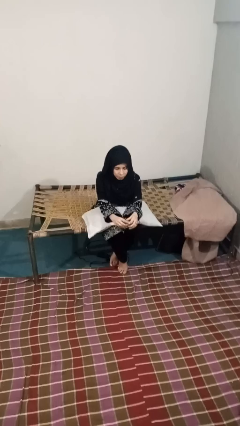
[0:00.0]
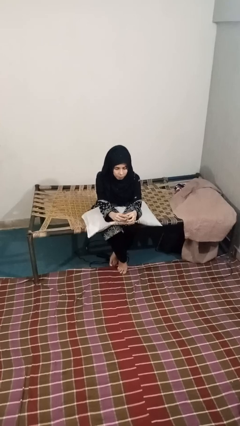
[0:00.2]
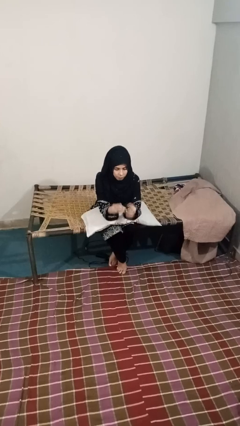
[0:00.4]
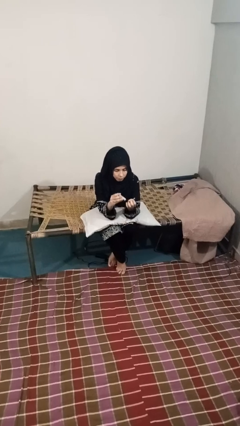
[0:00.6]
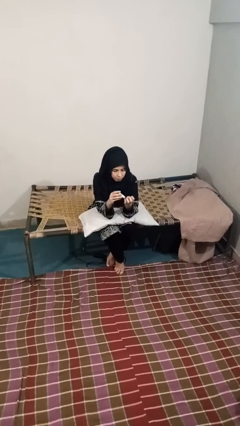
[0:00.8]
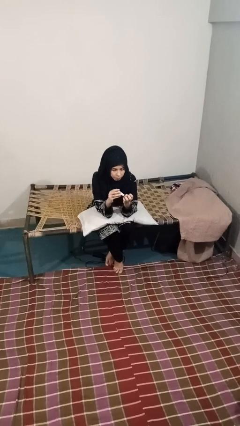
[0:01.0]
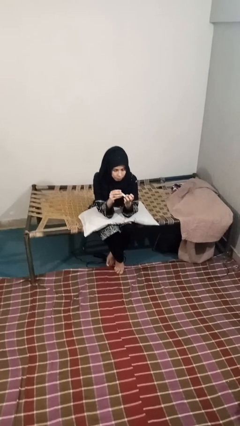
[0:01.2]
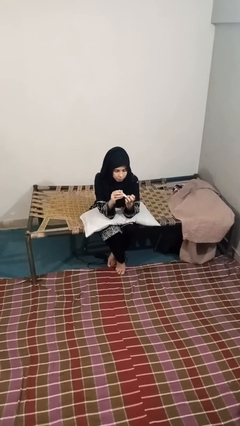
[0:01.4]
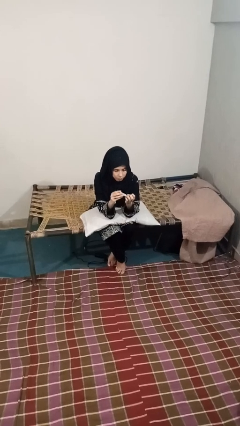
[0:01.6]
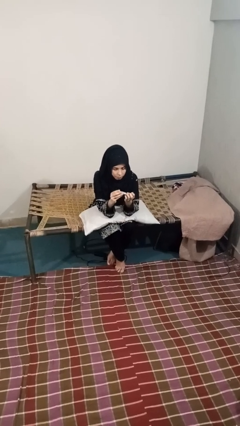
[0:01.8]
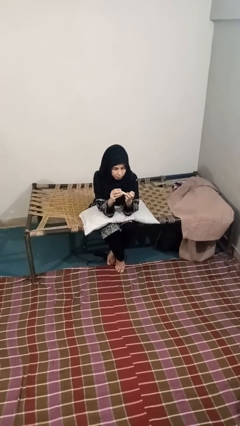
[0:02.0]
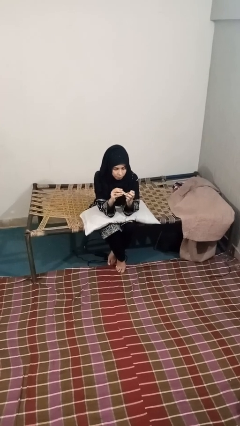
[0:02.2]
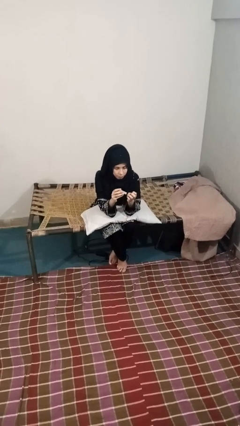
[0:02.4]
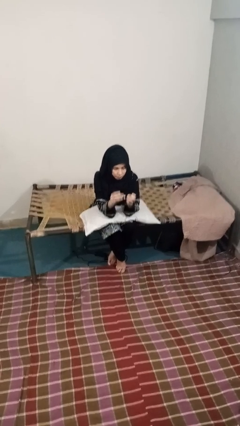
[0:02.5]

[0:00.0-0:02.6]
person clips fingernails

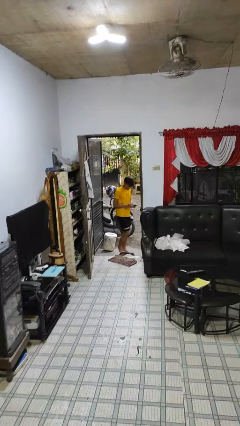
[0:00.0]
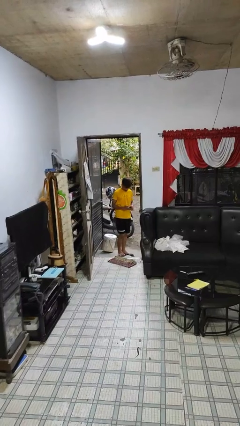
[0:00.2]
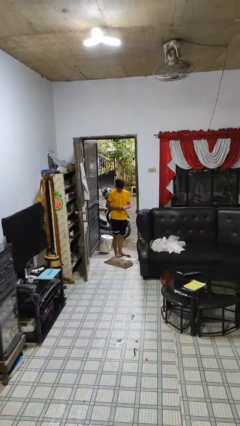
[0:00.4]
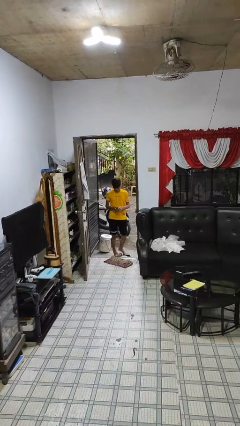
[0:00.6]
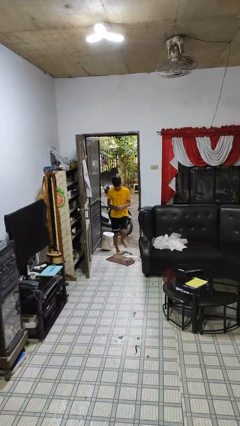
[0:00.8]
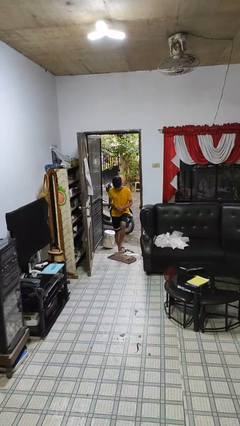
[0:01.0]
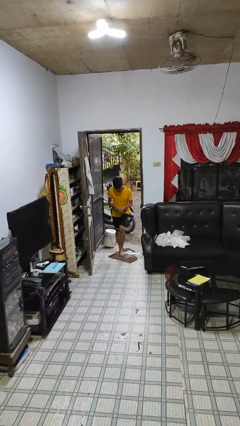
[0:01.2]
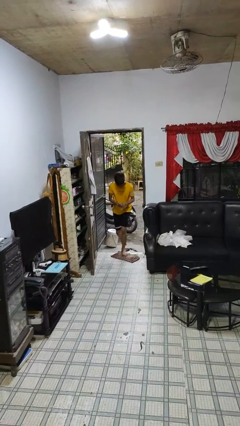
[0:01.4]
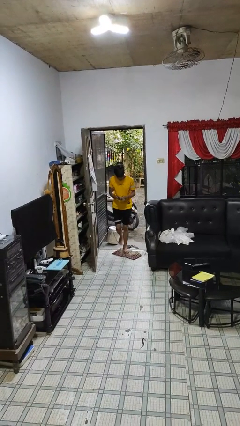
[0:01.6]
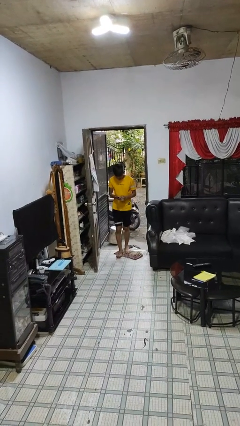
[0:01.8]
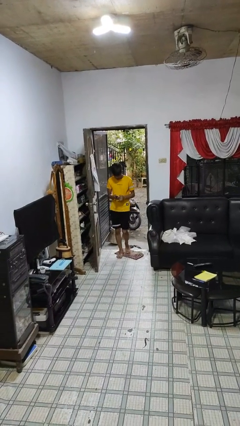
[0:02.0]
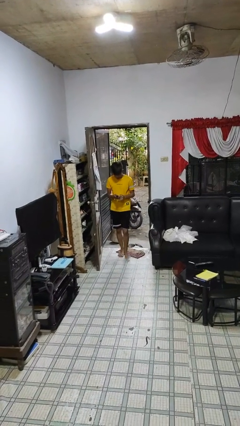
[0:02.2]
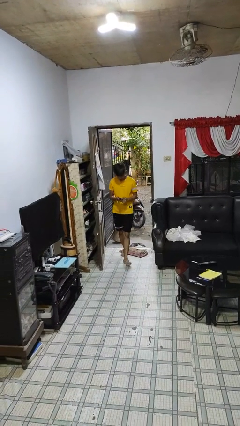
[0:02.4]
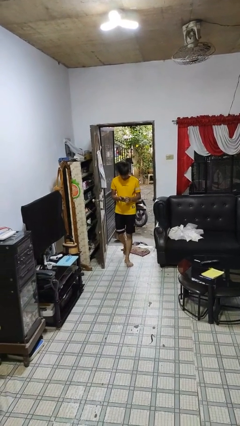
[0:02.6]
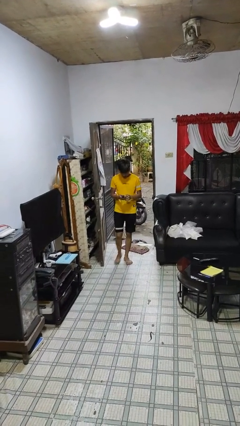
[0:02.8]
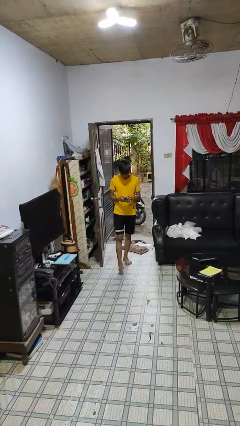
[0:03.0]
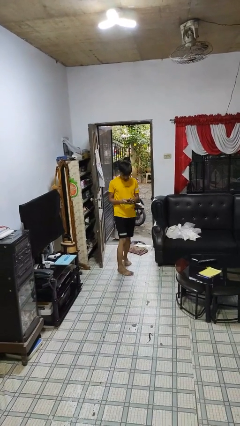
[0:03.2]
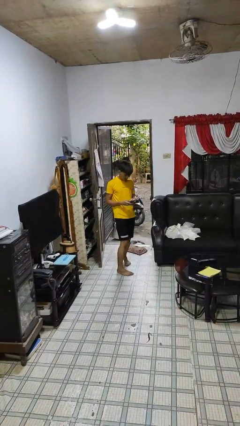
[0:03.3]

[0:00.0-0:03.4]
person enters scene through structure

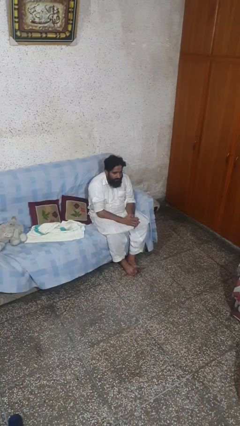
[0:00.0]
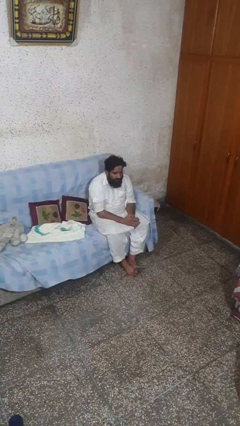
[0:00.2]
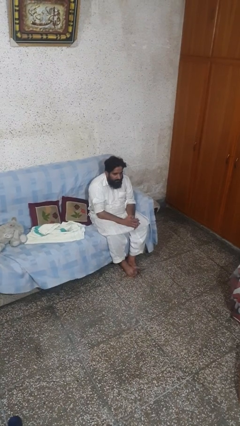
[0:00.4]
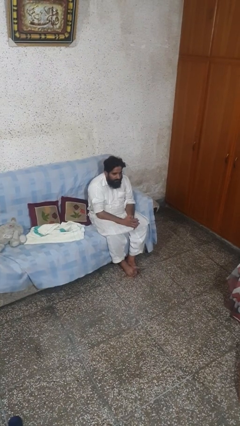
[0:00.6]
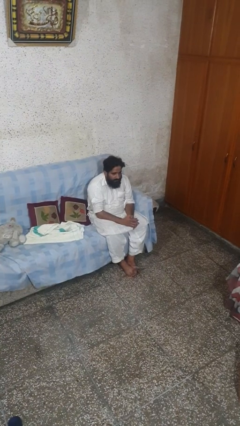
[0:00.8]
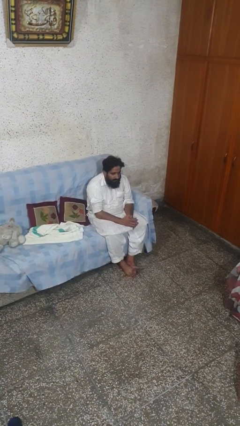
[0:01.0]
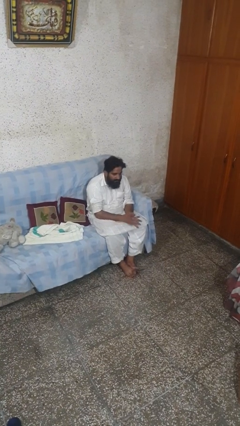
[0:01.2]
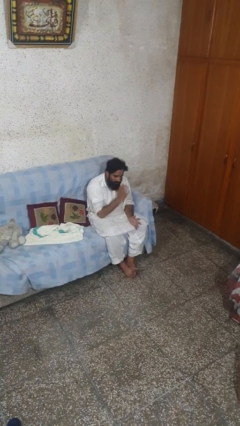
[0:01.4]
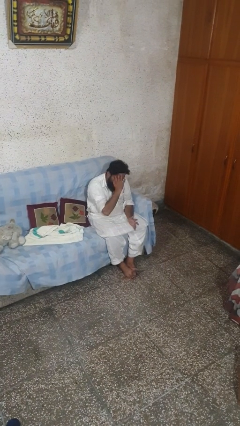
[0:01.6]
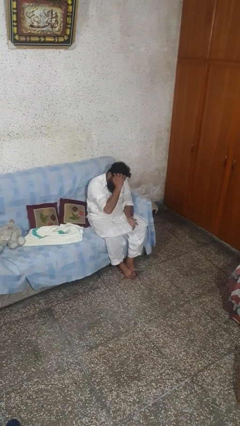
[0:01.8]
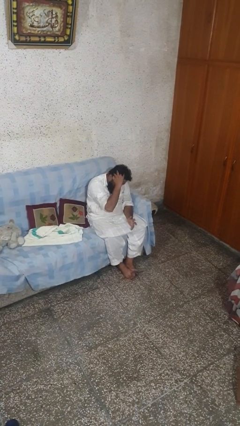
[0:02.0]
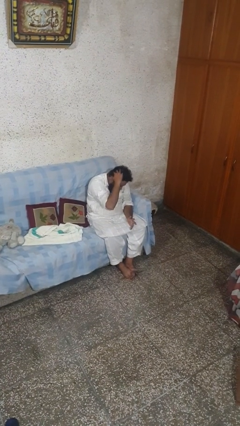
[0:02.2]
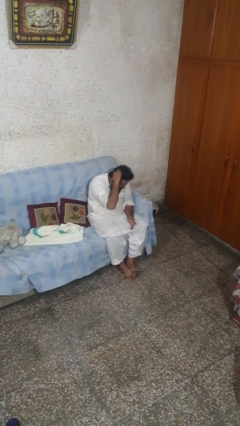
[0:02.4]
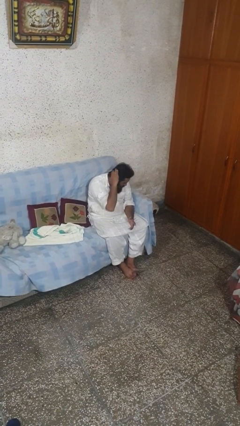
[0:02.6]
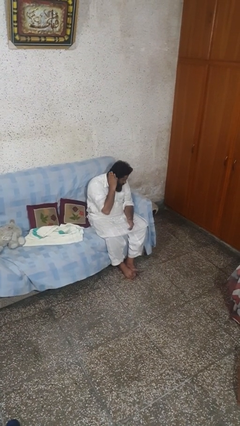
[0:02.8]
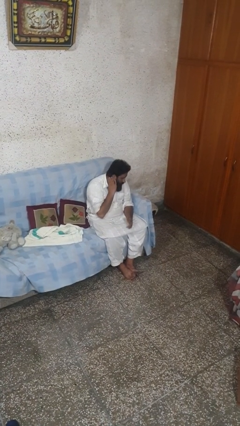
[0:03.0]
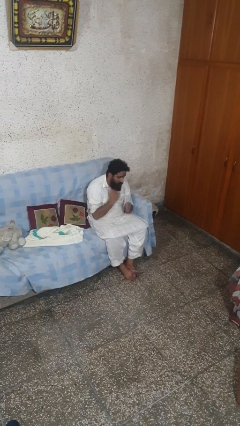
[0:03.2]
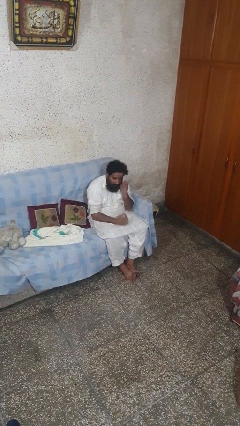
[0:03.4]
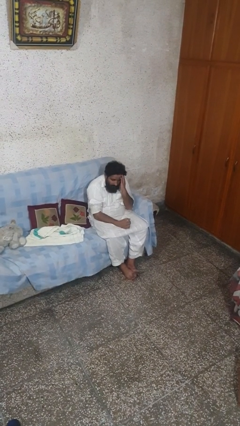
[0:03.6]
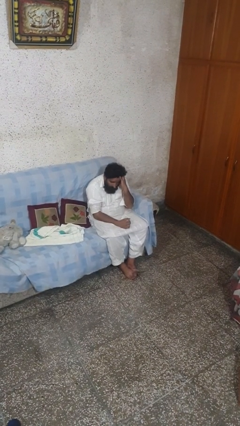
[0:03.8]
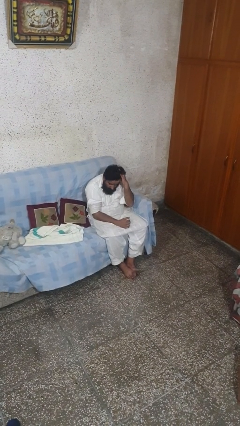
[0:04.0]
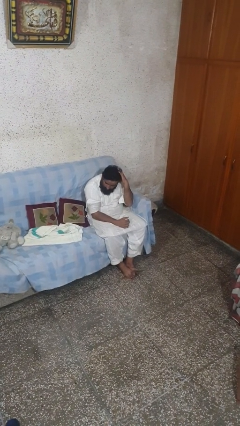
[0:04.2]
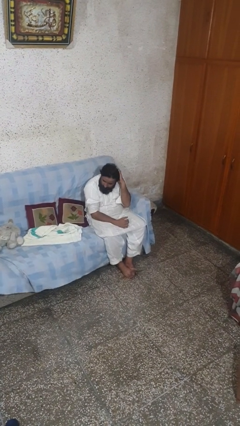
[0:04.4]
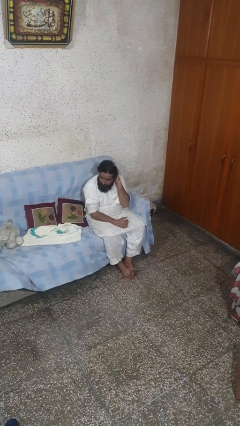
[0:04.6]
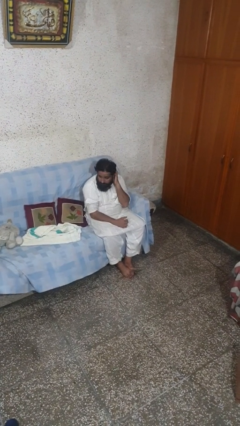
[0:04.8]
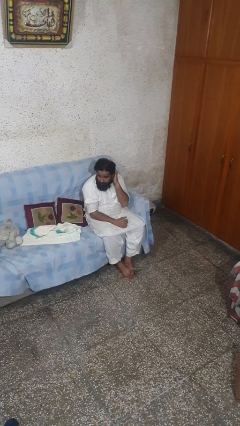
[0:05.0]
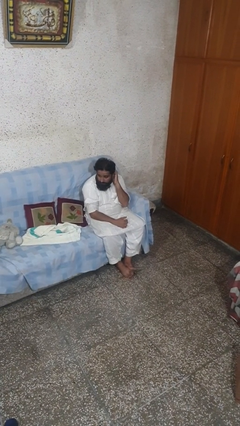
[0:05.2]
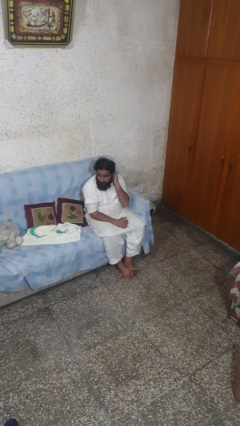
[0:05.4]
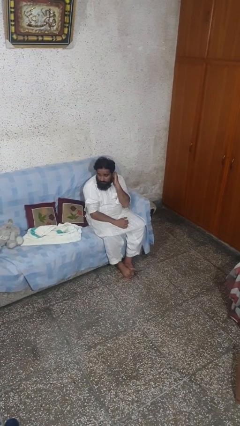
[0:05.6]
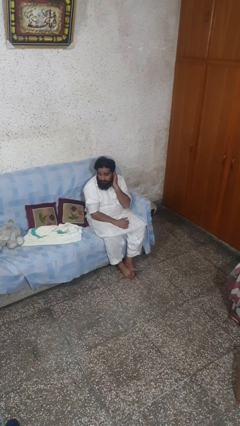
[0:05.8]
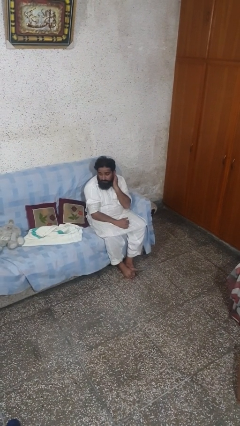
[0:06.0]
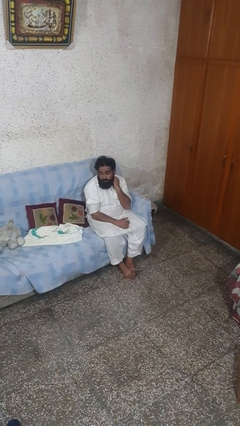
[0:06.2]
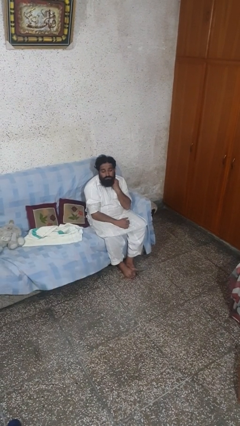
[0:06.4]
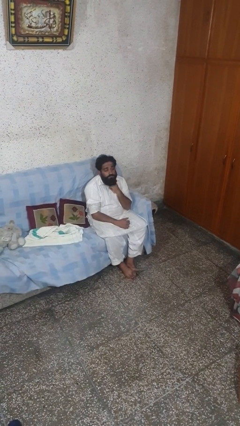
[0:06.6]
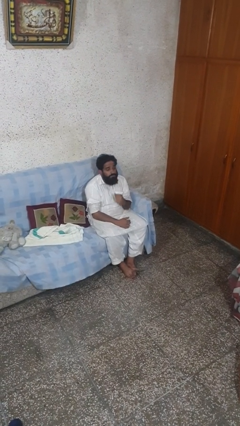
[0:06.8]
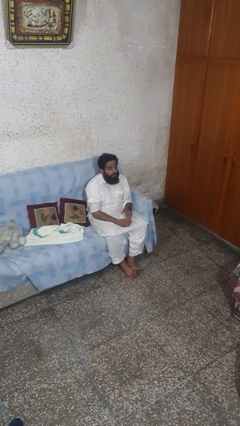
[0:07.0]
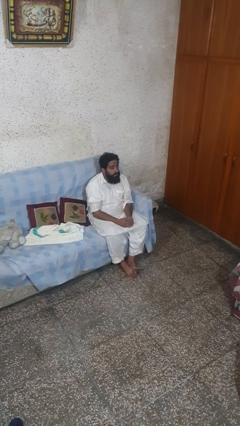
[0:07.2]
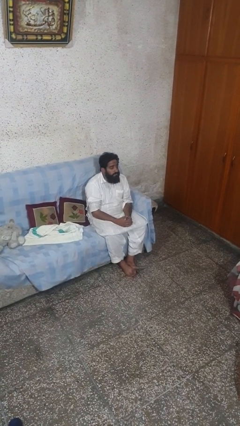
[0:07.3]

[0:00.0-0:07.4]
person strokes hair

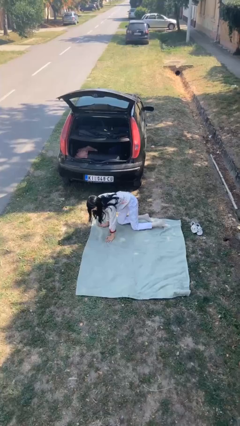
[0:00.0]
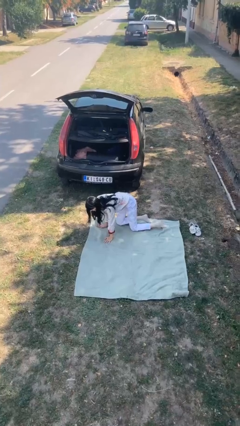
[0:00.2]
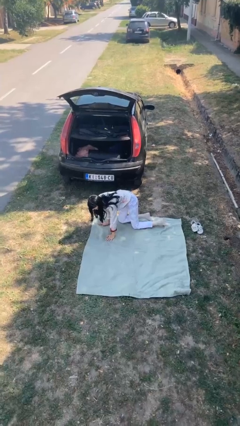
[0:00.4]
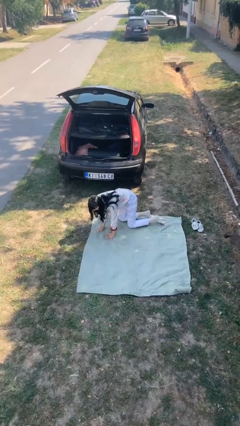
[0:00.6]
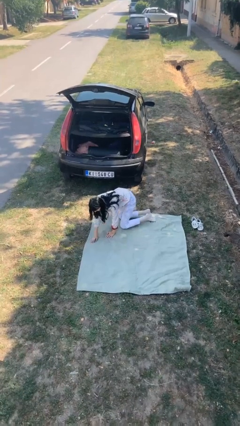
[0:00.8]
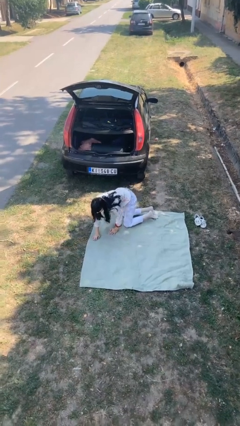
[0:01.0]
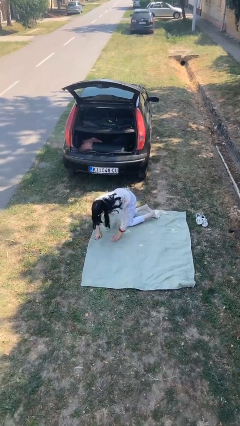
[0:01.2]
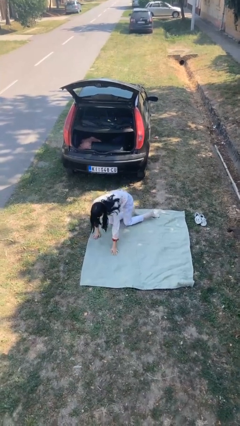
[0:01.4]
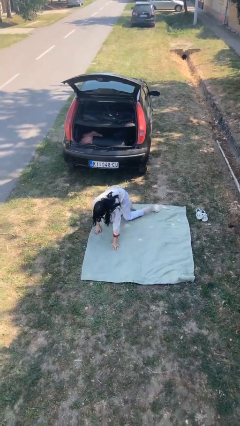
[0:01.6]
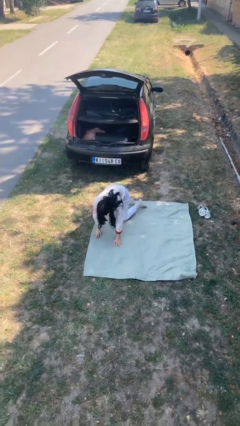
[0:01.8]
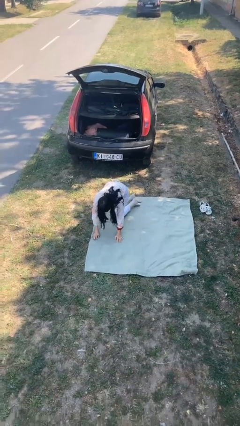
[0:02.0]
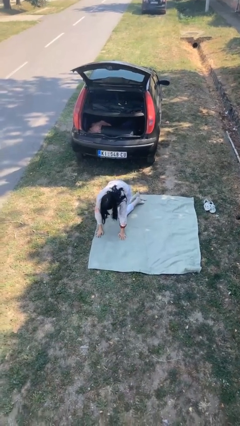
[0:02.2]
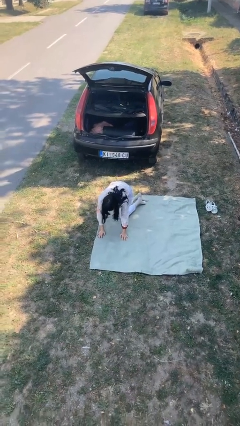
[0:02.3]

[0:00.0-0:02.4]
person crawls

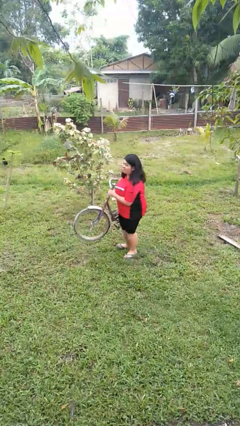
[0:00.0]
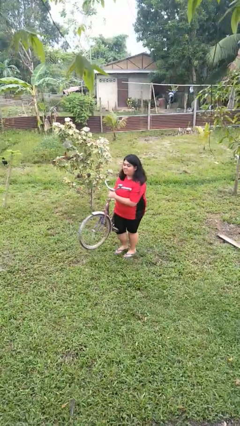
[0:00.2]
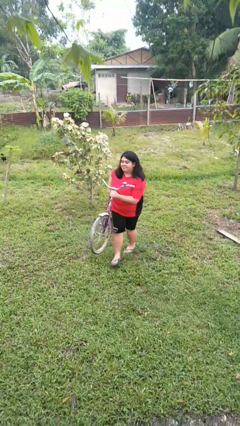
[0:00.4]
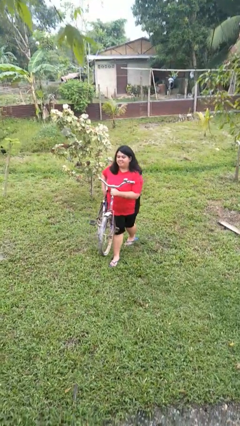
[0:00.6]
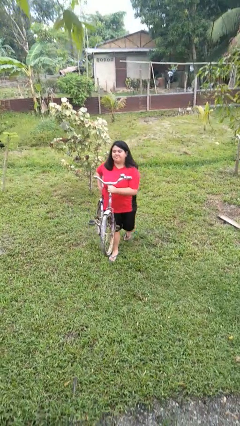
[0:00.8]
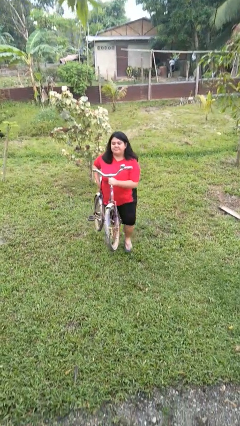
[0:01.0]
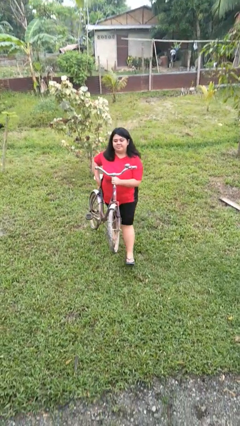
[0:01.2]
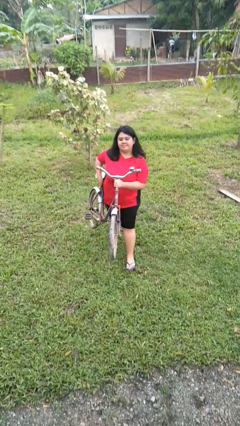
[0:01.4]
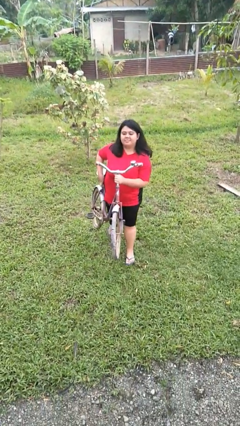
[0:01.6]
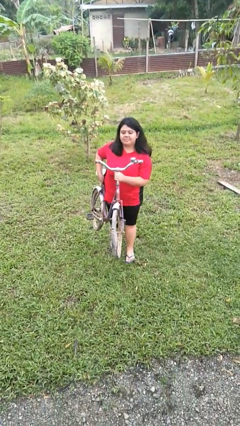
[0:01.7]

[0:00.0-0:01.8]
person carries bicycle
